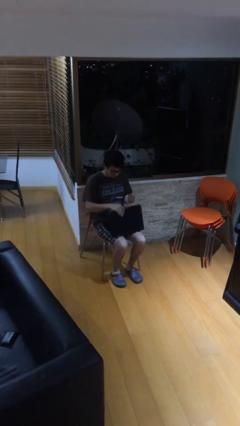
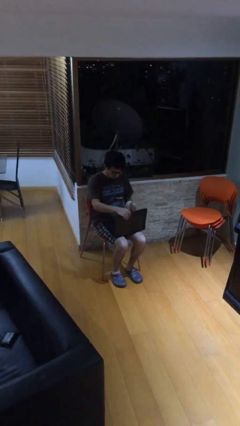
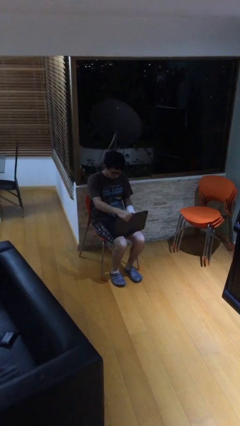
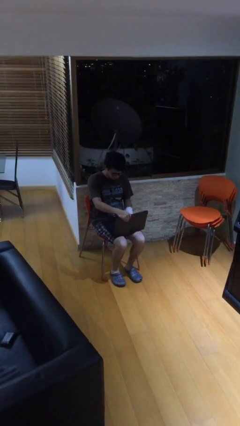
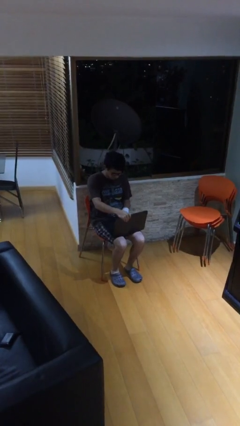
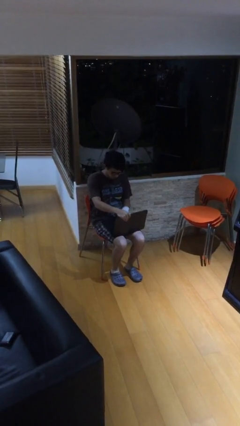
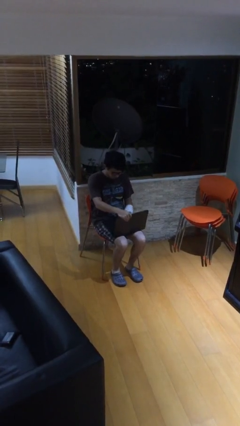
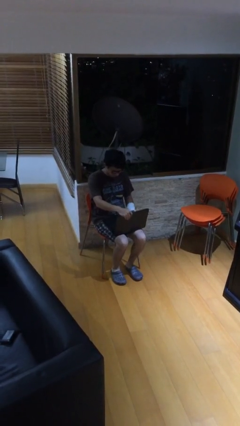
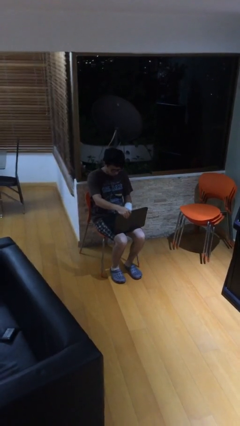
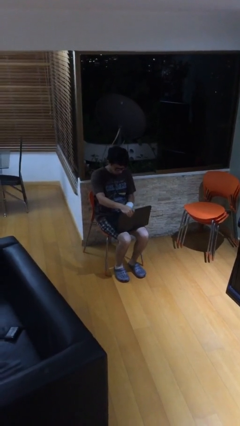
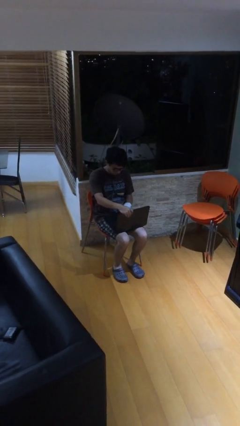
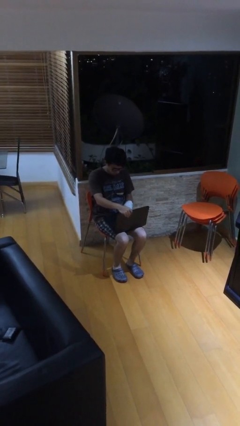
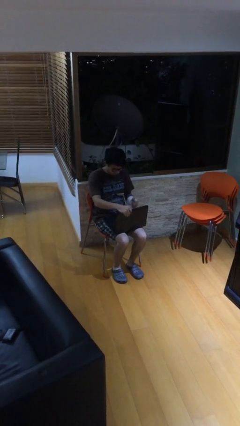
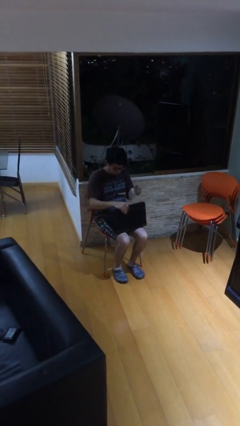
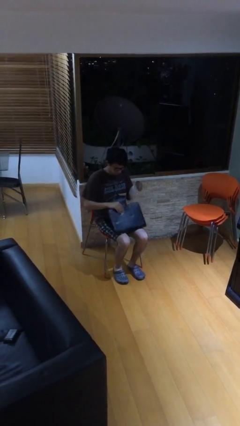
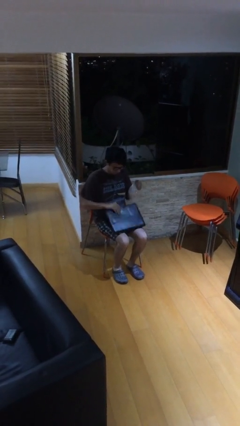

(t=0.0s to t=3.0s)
person interacts with laptop

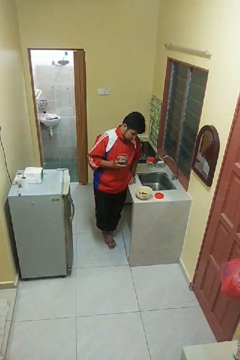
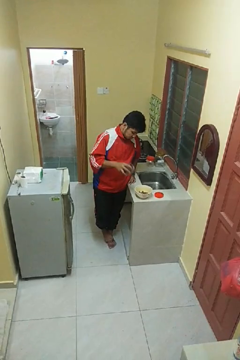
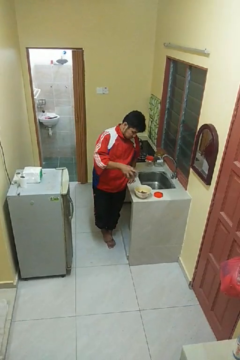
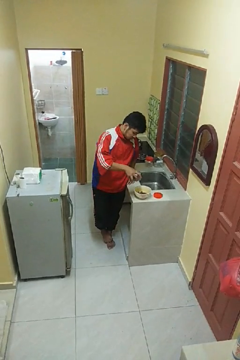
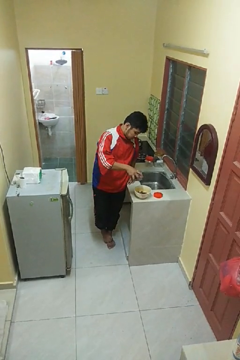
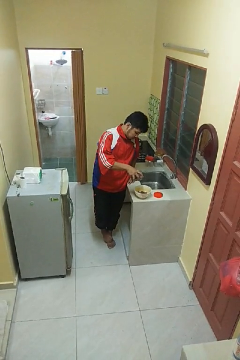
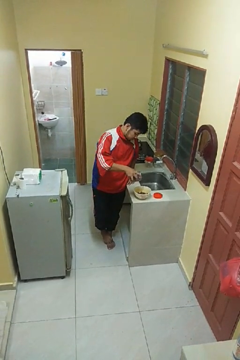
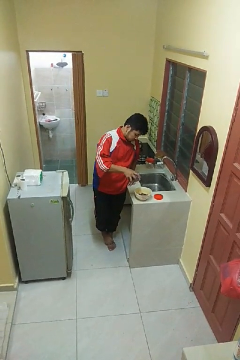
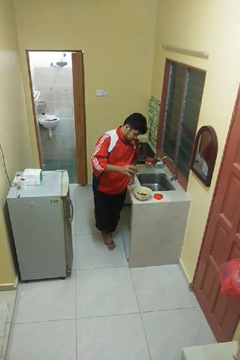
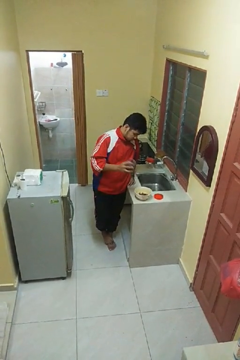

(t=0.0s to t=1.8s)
person pours into bowl

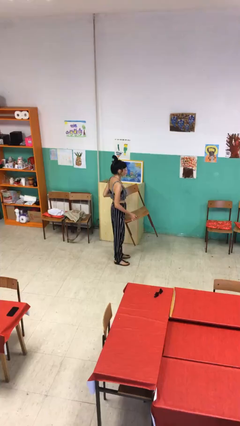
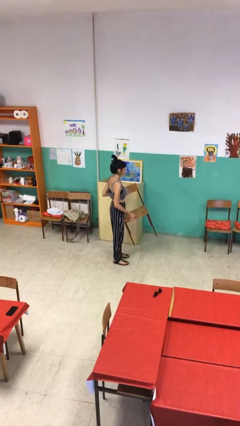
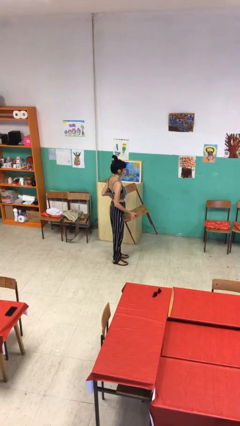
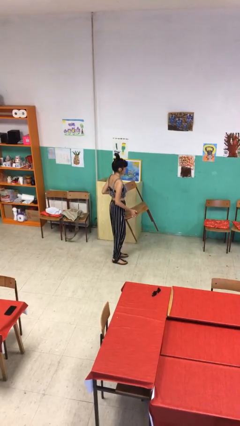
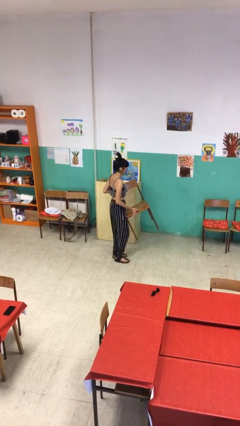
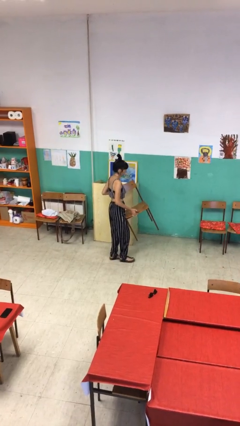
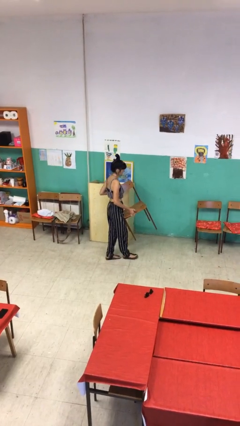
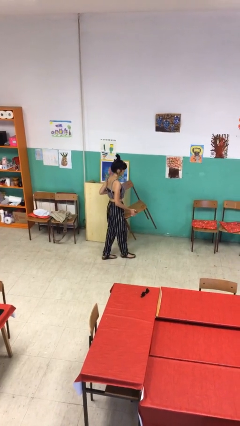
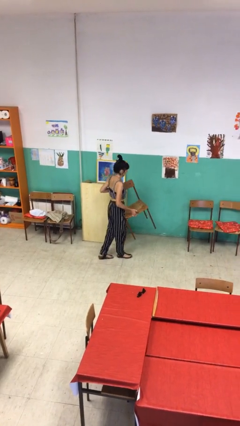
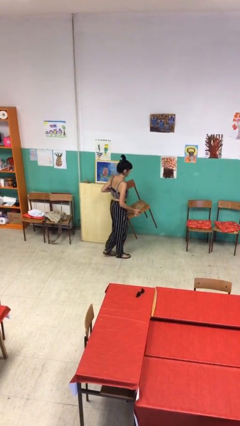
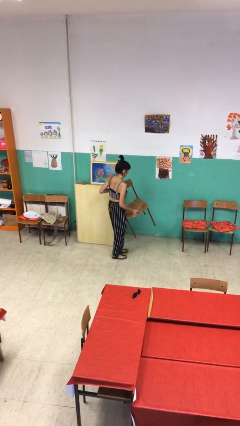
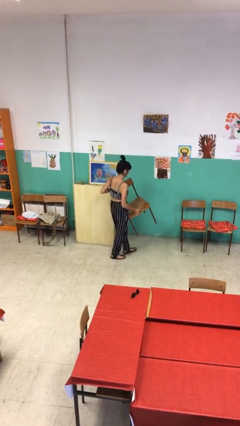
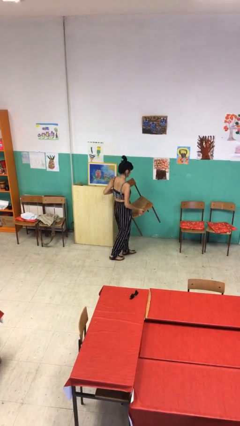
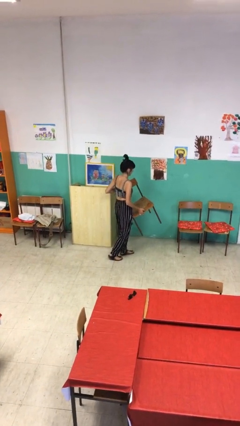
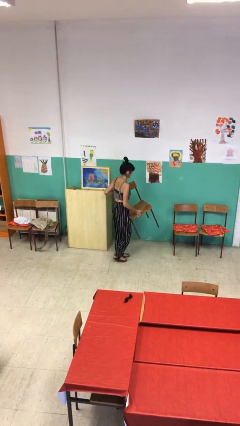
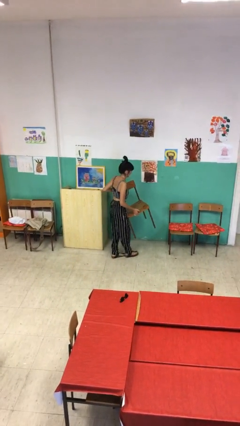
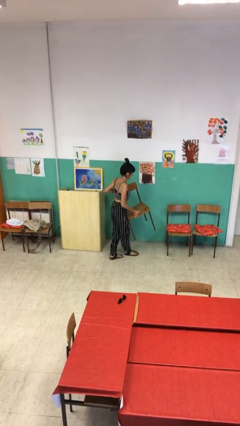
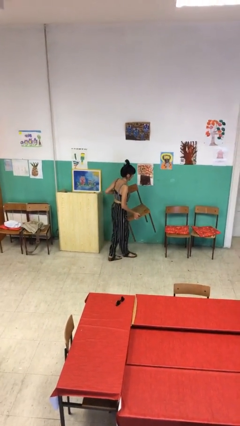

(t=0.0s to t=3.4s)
person carries heavy object

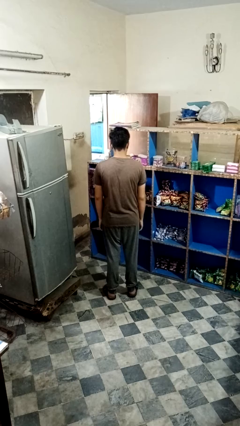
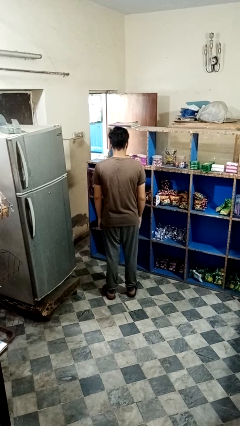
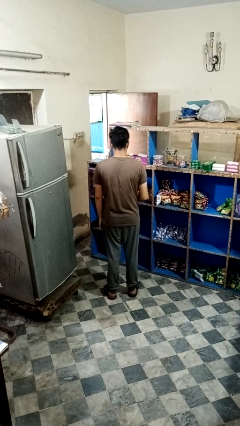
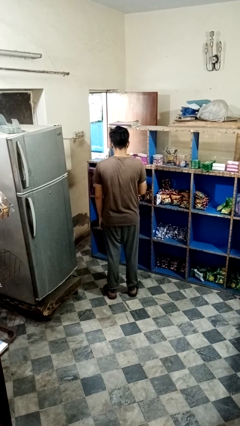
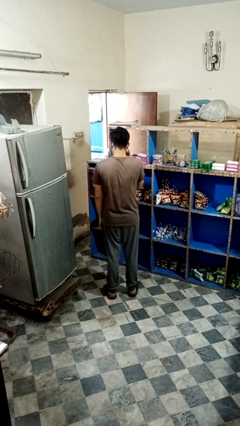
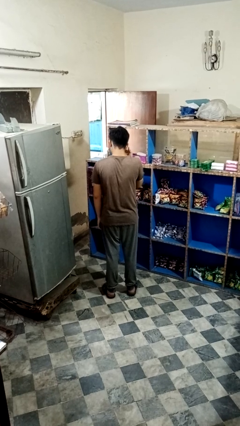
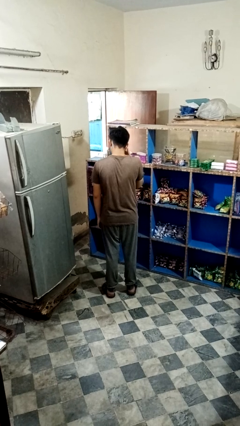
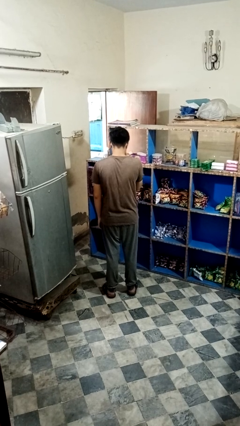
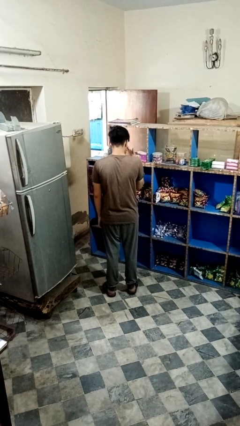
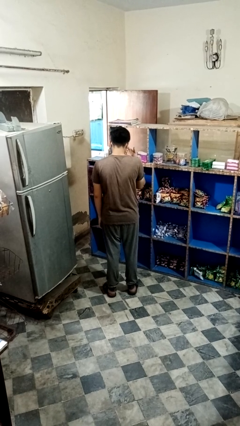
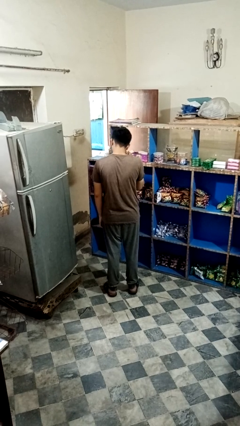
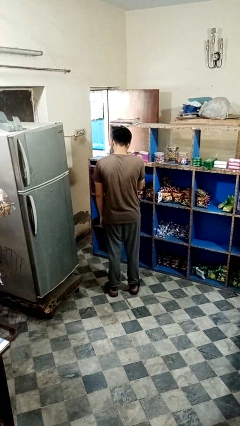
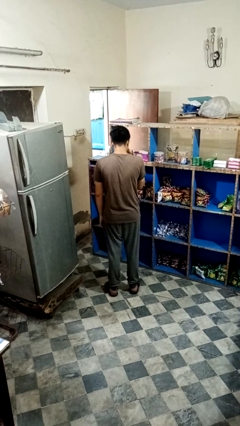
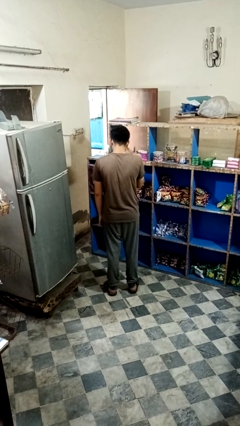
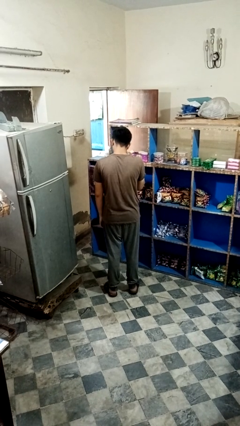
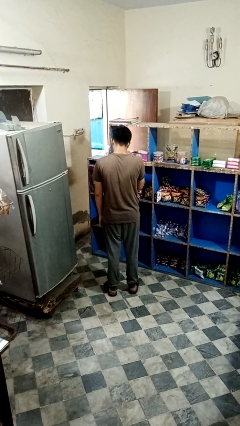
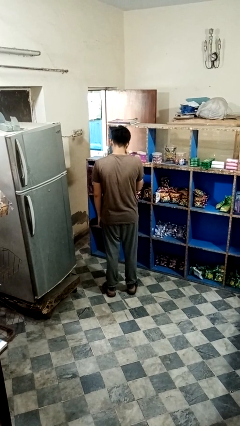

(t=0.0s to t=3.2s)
person rubs eyes

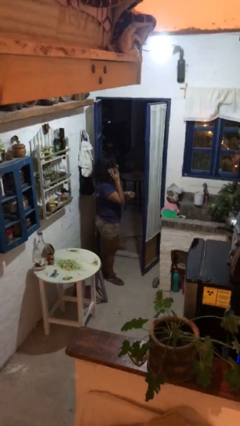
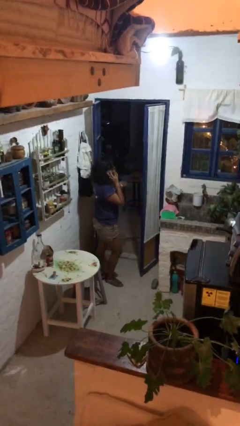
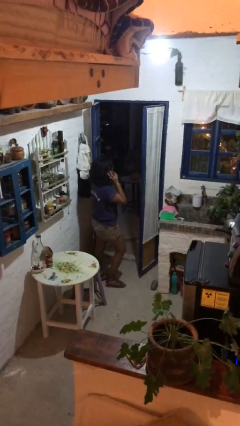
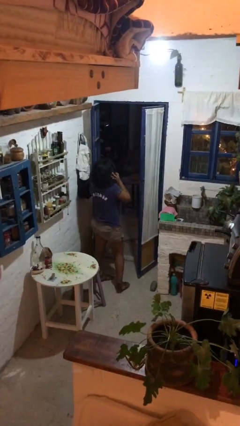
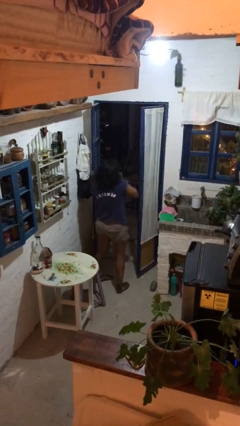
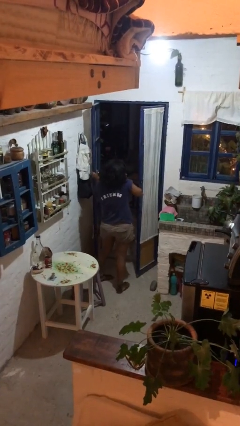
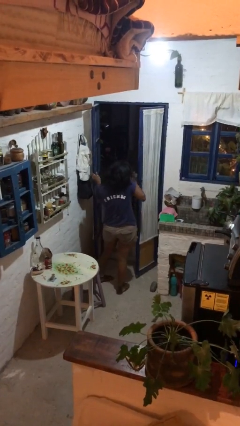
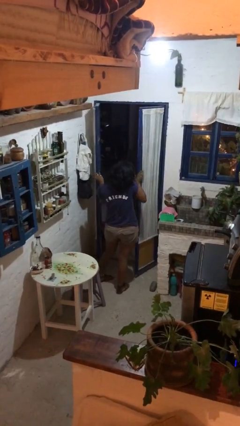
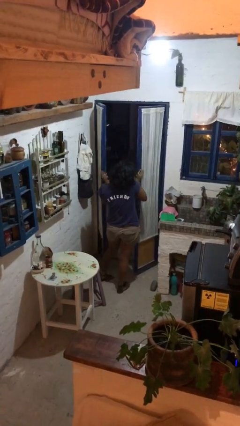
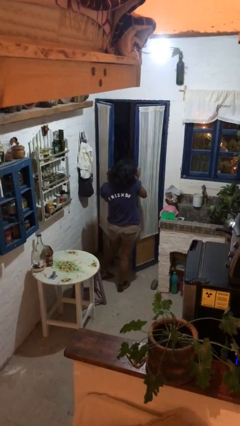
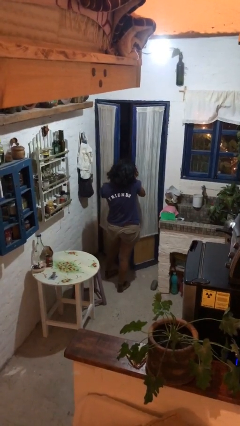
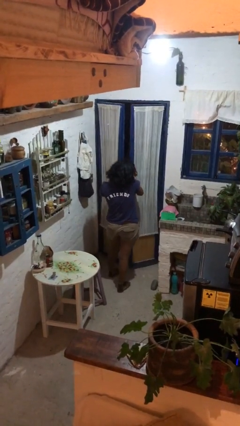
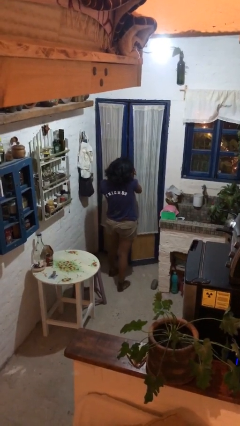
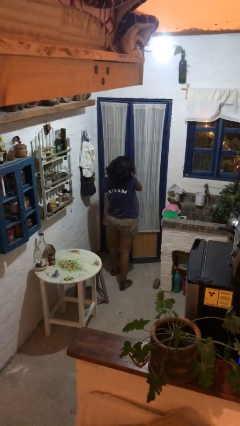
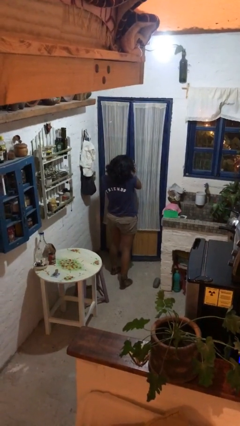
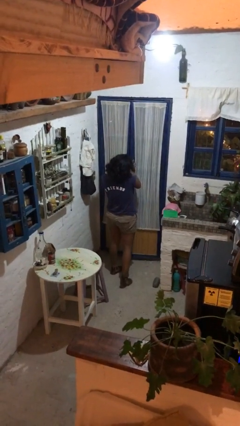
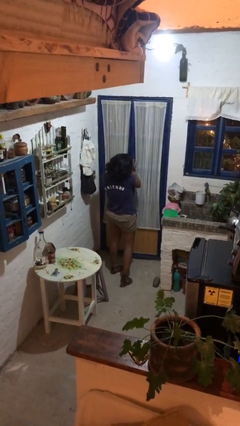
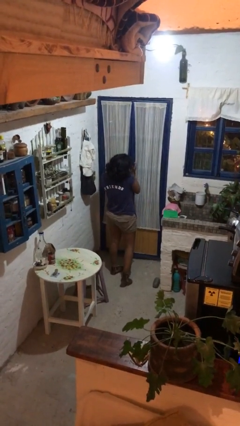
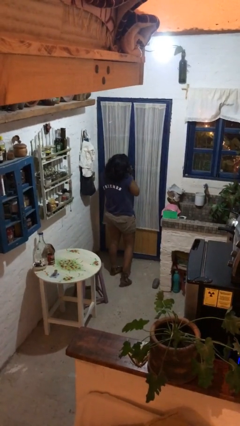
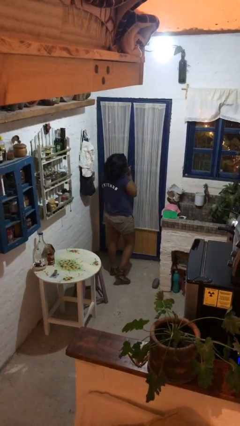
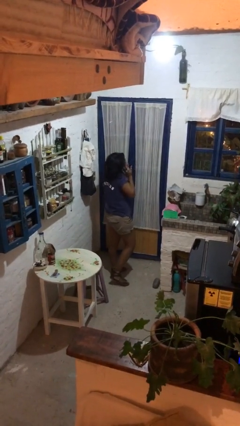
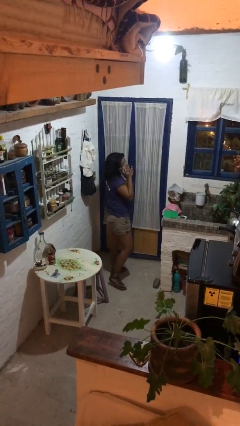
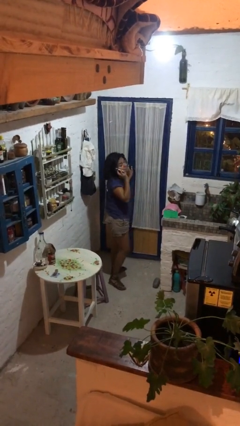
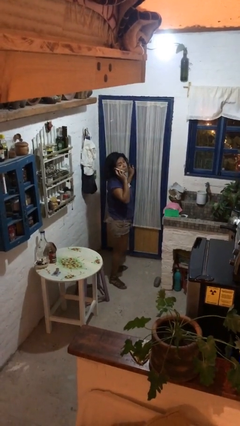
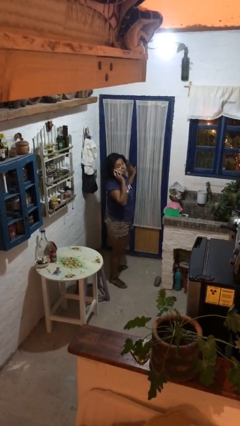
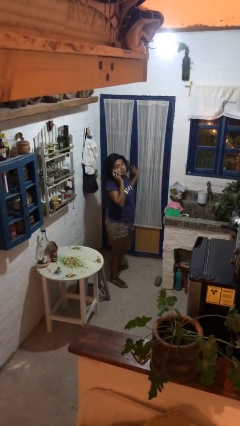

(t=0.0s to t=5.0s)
person closes facility door

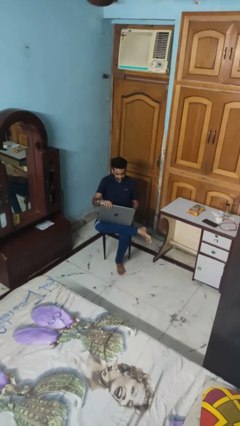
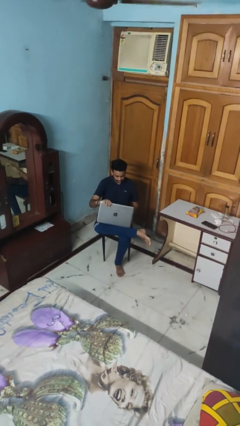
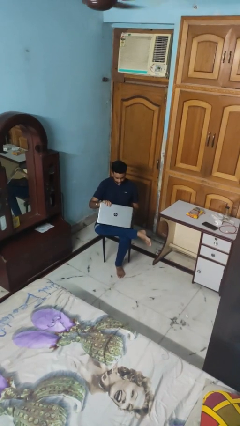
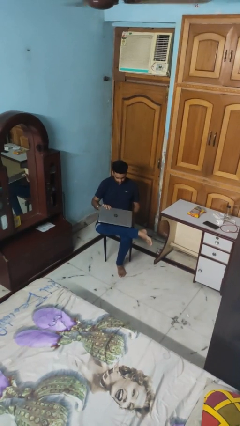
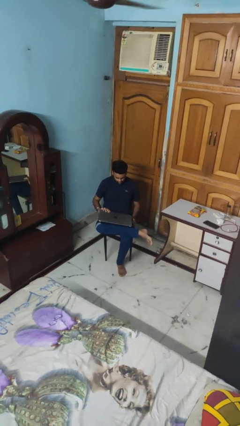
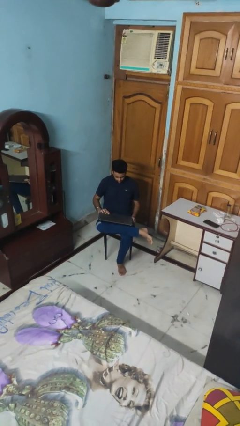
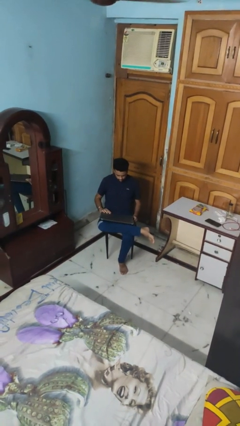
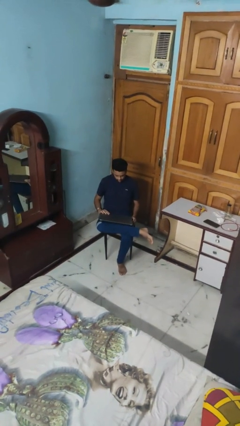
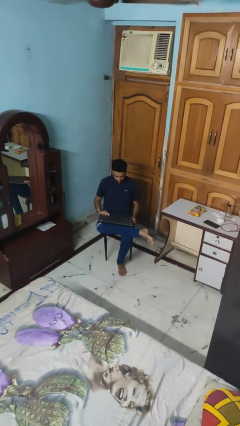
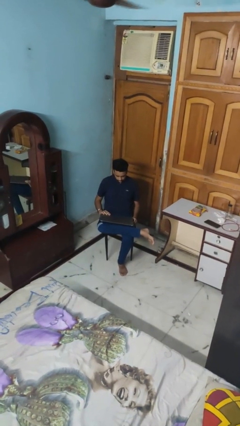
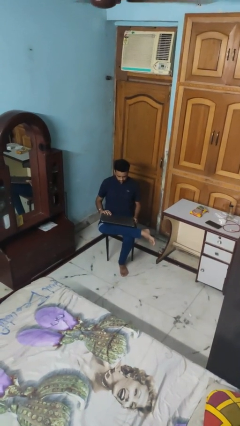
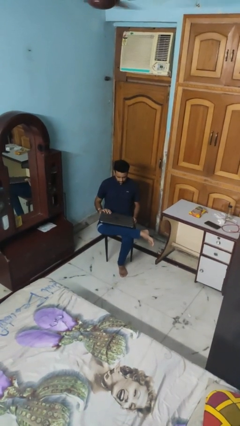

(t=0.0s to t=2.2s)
person closes laptop
